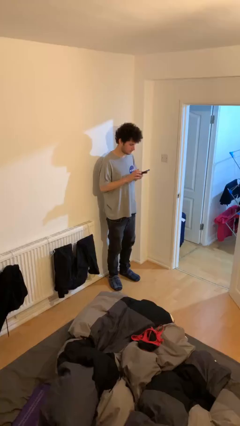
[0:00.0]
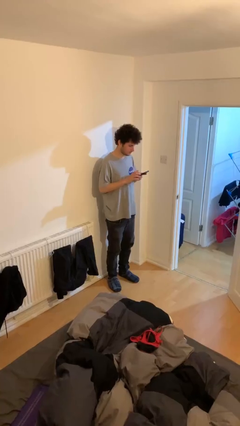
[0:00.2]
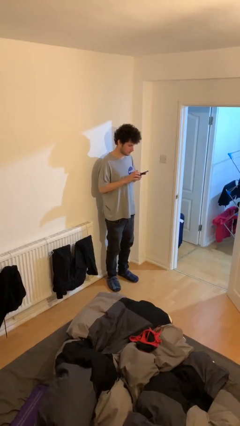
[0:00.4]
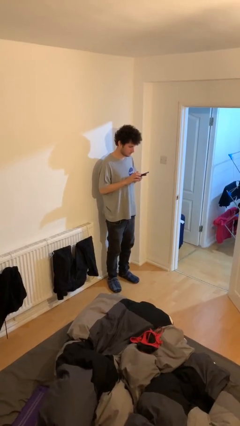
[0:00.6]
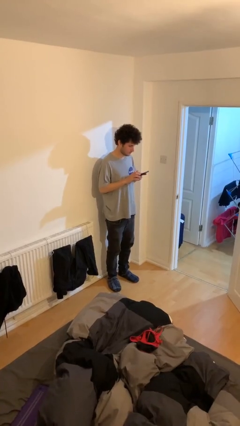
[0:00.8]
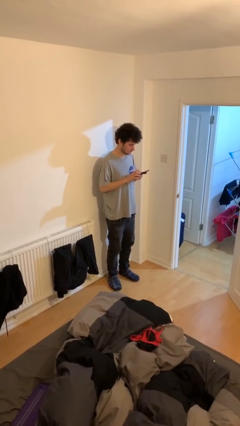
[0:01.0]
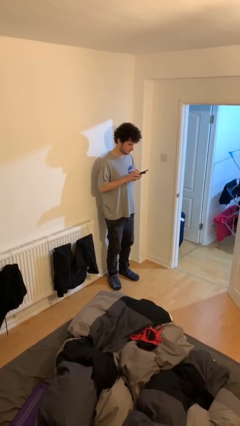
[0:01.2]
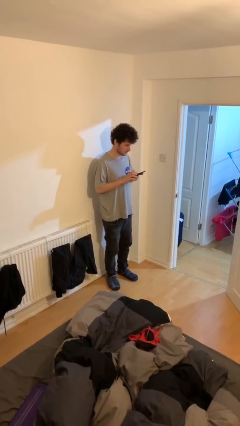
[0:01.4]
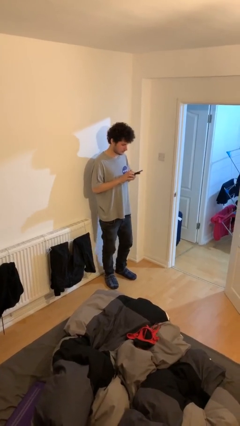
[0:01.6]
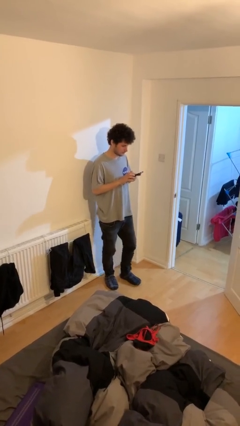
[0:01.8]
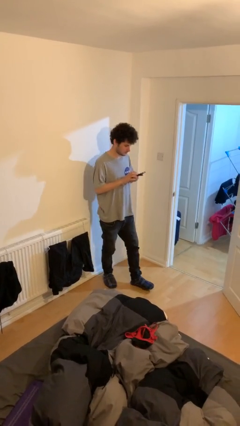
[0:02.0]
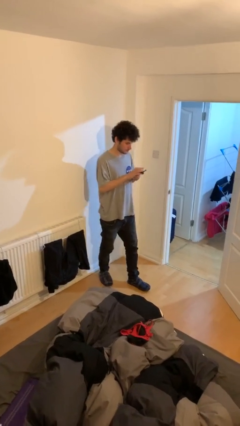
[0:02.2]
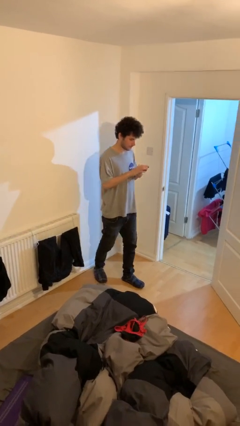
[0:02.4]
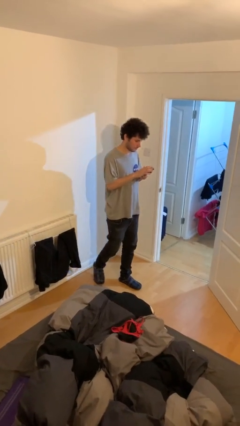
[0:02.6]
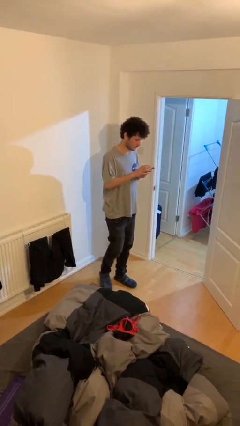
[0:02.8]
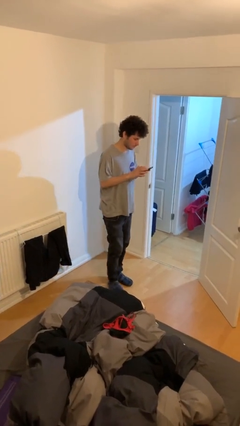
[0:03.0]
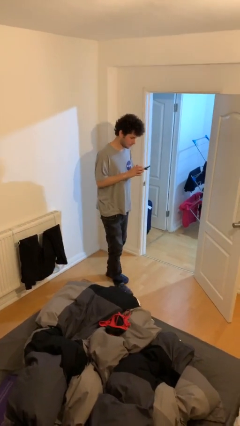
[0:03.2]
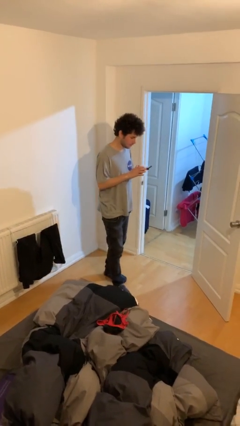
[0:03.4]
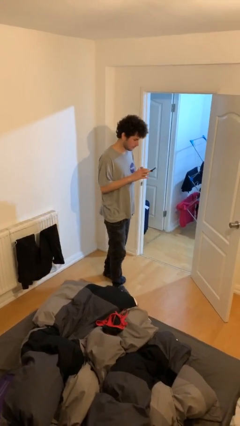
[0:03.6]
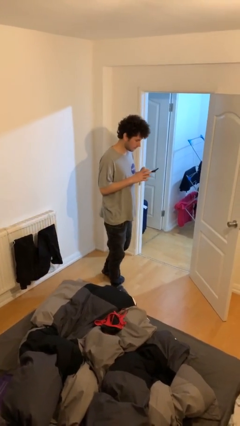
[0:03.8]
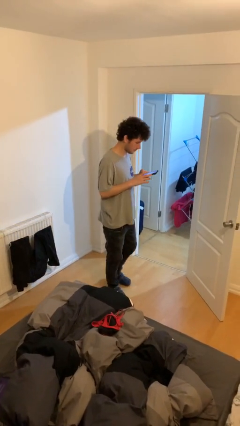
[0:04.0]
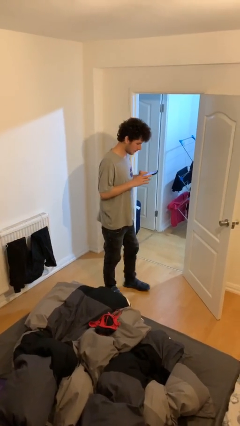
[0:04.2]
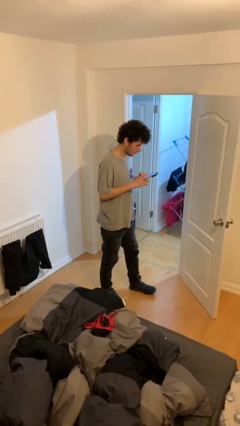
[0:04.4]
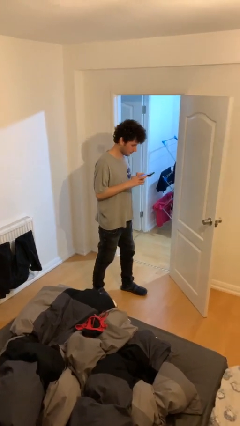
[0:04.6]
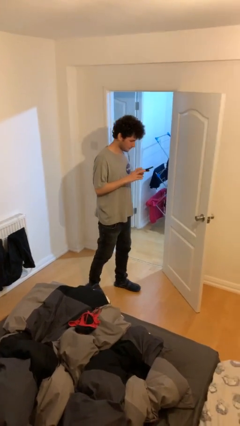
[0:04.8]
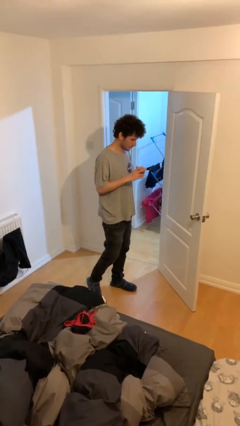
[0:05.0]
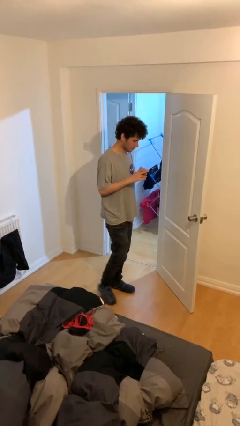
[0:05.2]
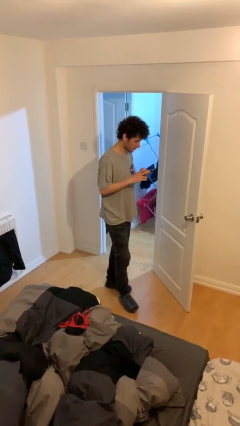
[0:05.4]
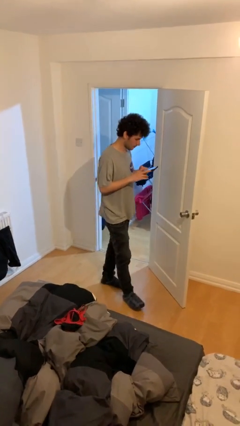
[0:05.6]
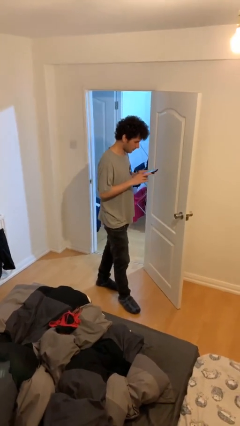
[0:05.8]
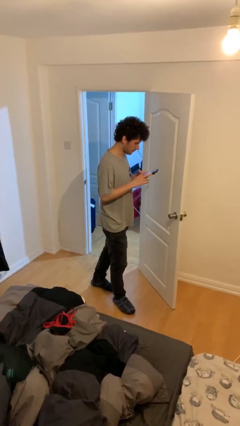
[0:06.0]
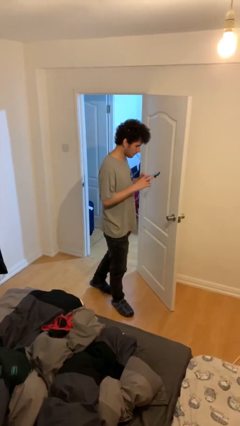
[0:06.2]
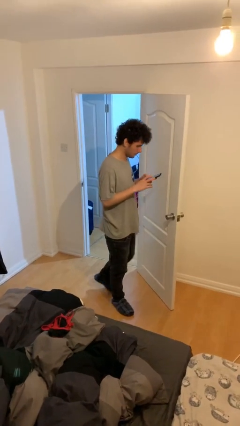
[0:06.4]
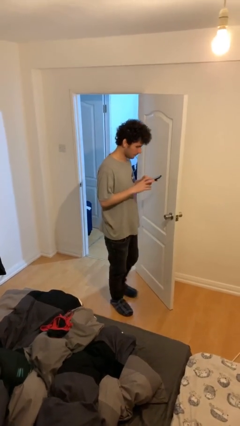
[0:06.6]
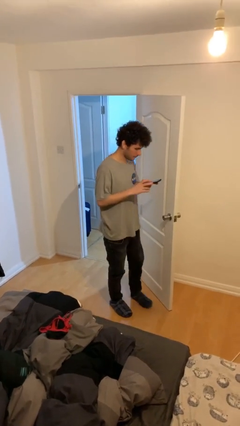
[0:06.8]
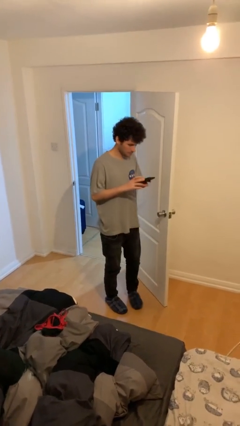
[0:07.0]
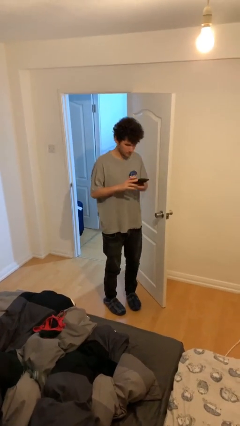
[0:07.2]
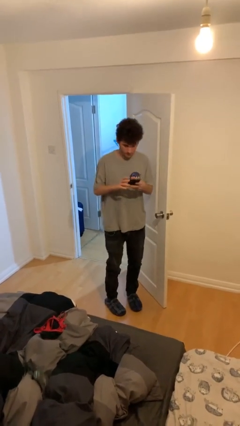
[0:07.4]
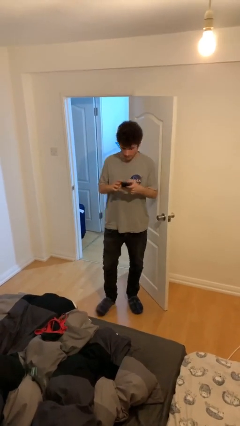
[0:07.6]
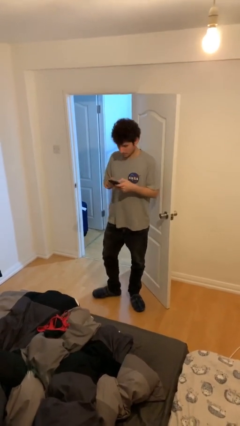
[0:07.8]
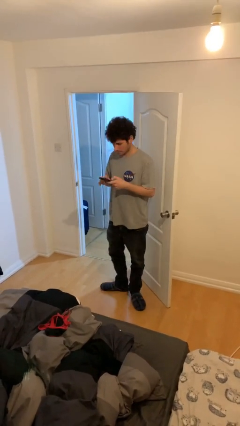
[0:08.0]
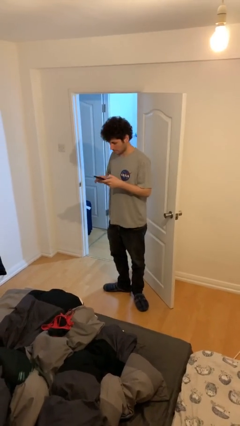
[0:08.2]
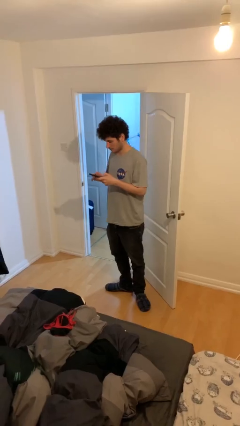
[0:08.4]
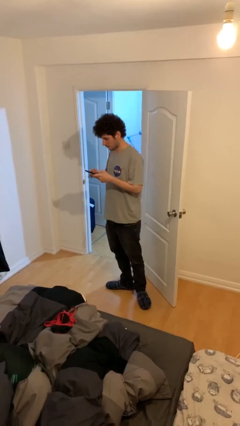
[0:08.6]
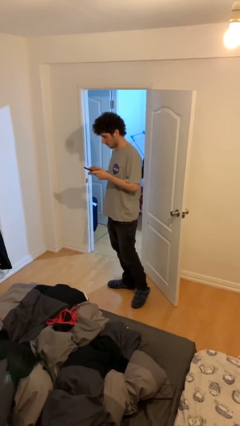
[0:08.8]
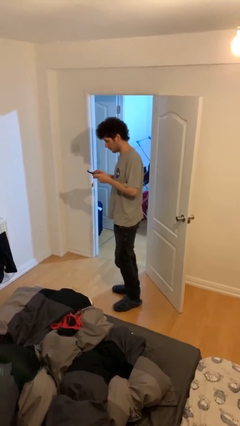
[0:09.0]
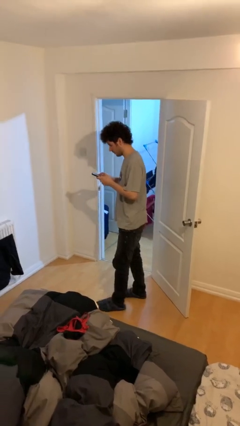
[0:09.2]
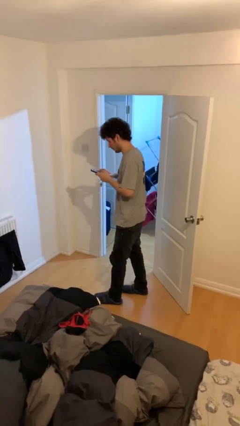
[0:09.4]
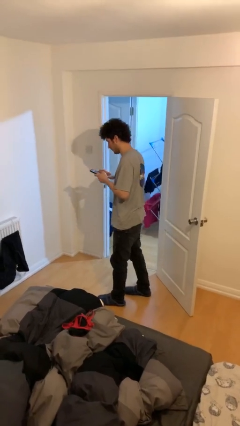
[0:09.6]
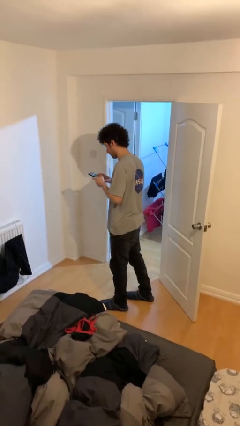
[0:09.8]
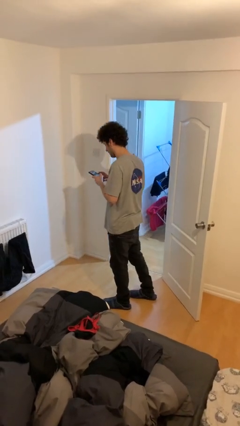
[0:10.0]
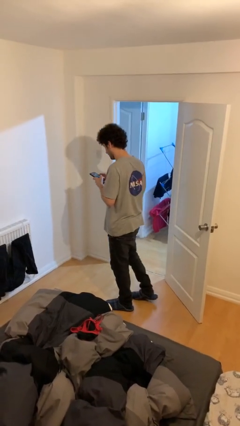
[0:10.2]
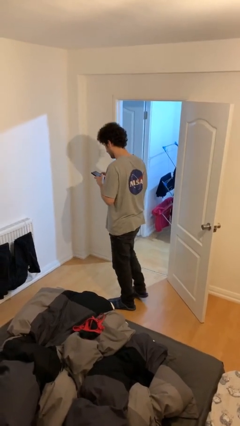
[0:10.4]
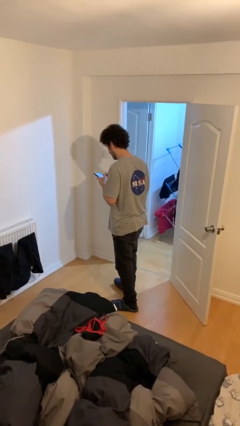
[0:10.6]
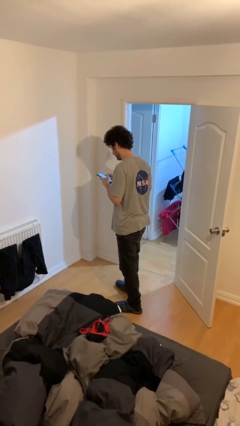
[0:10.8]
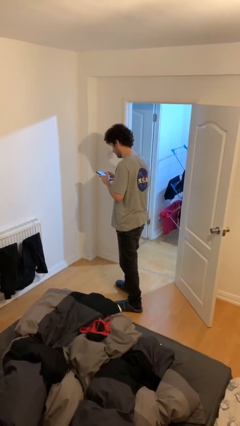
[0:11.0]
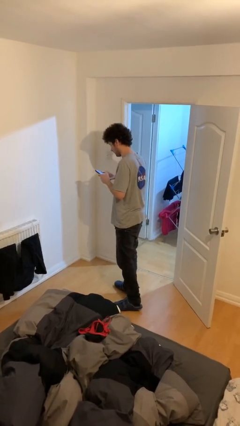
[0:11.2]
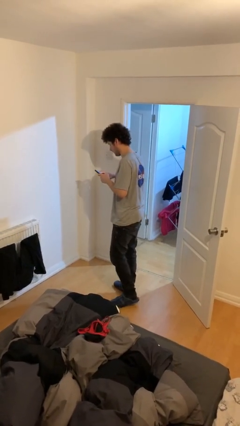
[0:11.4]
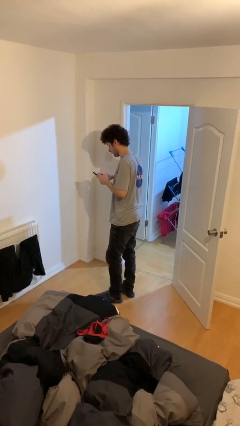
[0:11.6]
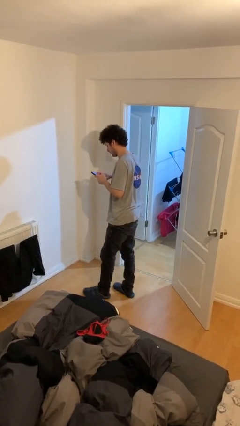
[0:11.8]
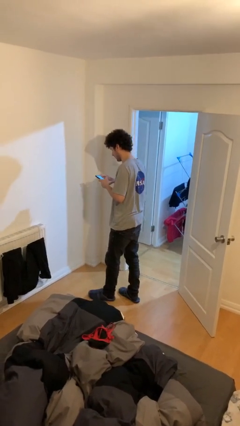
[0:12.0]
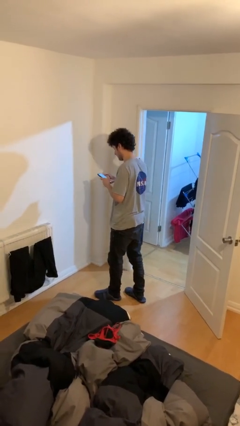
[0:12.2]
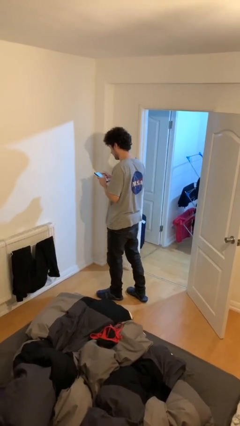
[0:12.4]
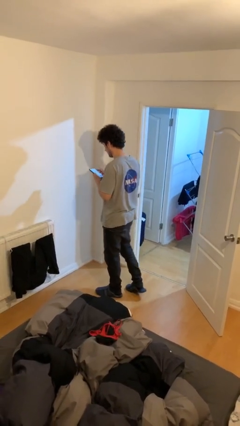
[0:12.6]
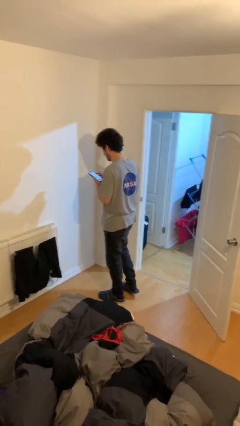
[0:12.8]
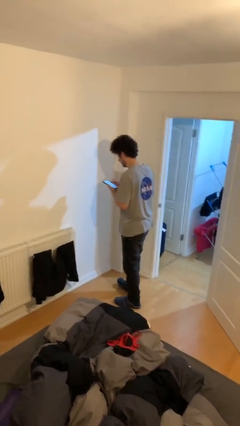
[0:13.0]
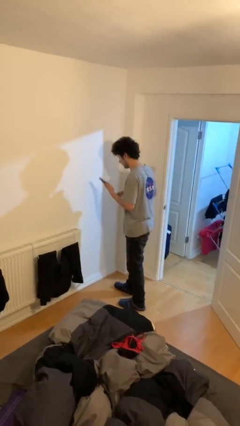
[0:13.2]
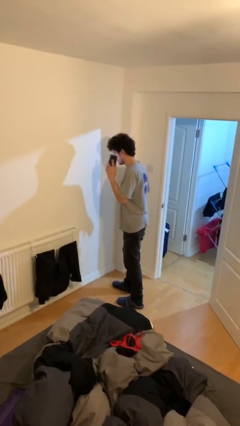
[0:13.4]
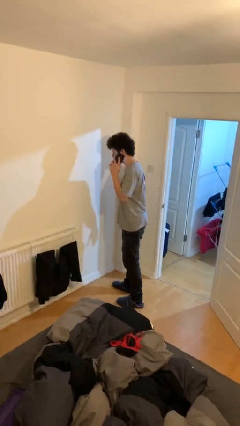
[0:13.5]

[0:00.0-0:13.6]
person texts on phone

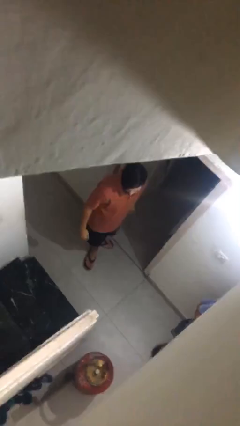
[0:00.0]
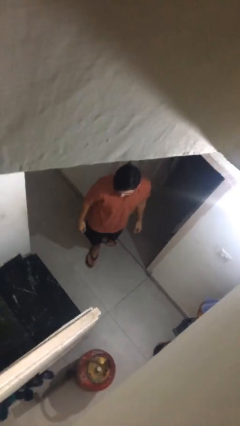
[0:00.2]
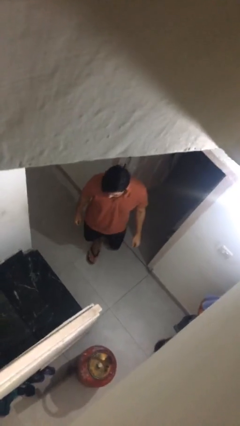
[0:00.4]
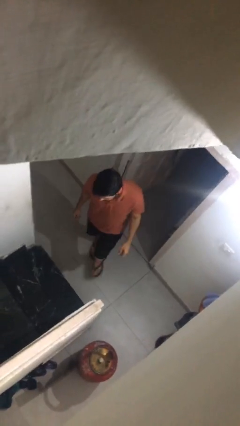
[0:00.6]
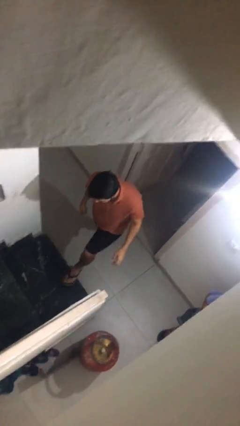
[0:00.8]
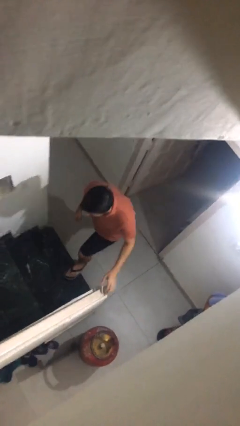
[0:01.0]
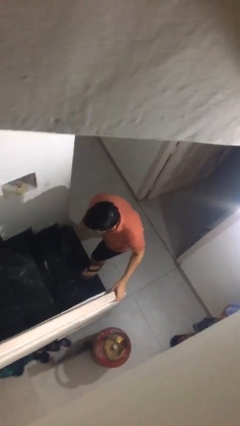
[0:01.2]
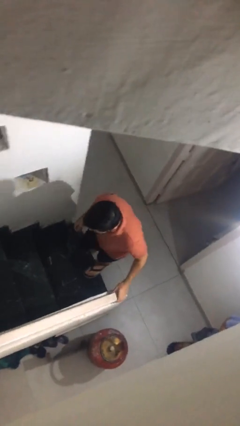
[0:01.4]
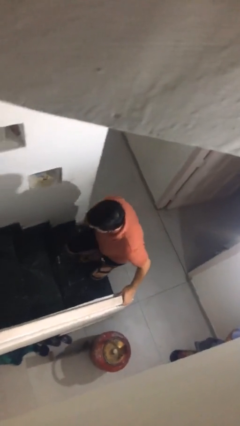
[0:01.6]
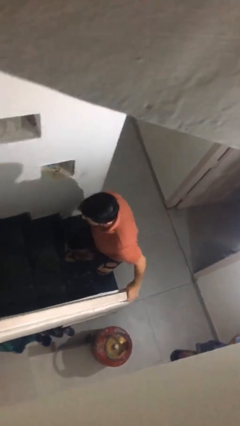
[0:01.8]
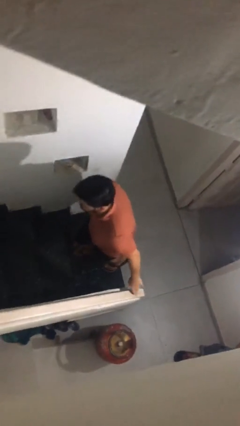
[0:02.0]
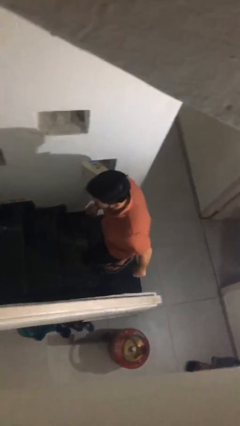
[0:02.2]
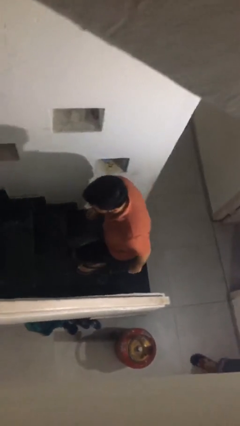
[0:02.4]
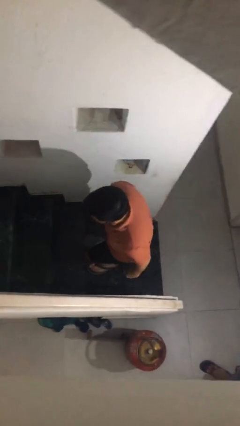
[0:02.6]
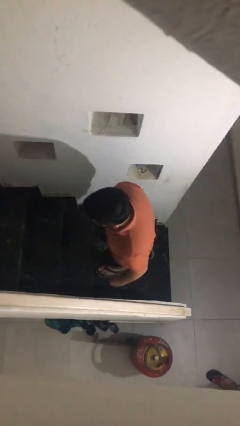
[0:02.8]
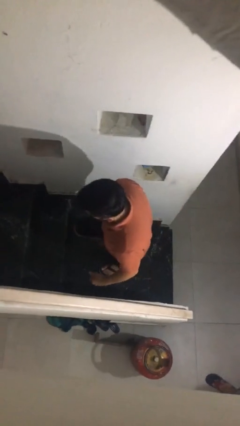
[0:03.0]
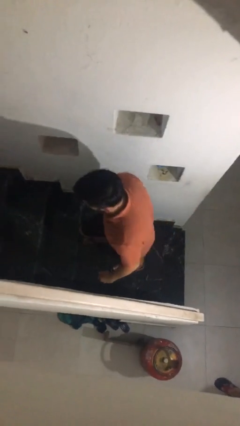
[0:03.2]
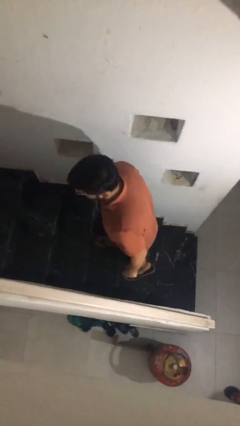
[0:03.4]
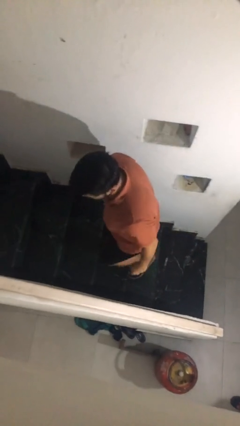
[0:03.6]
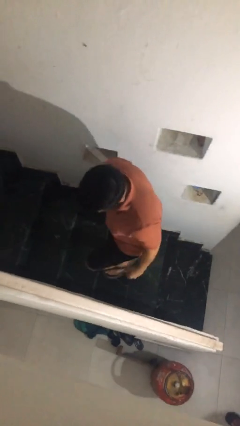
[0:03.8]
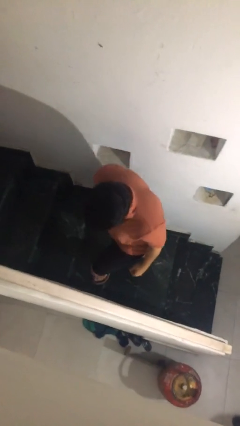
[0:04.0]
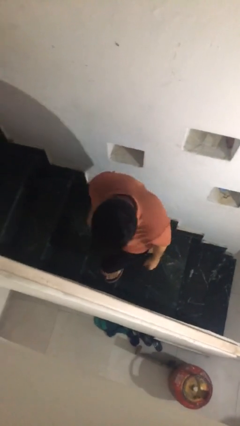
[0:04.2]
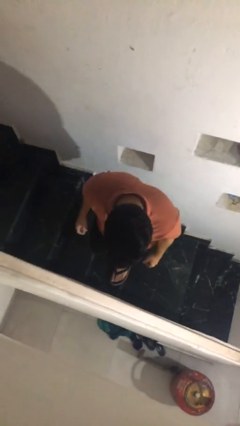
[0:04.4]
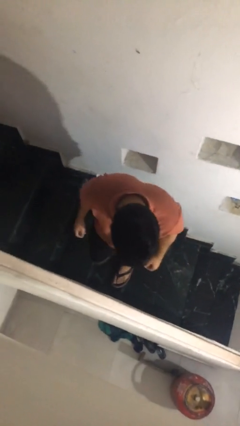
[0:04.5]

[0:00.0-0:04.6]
person climbs up stairs
